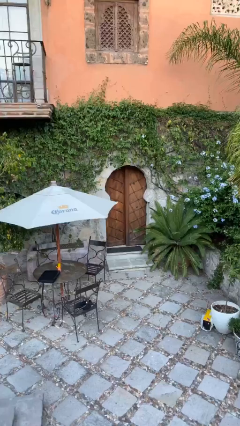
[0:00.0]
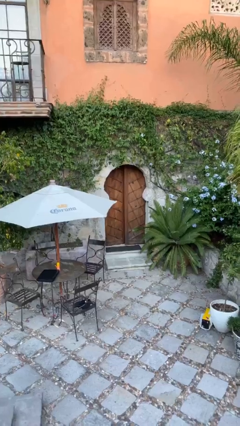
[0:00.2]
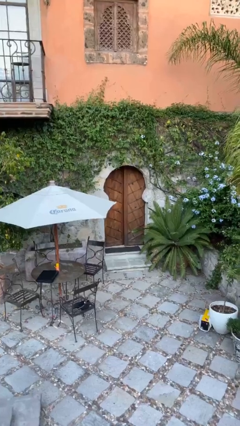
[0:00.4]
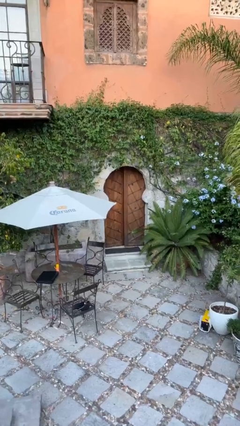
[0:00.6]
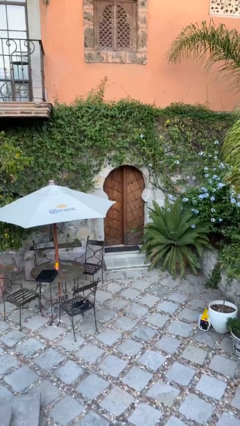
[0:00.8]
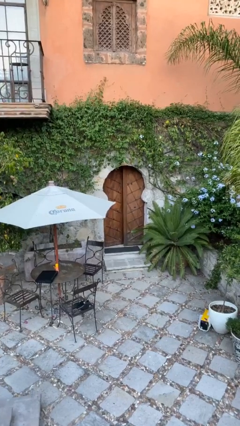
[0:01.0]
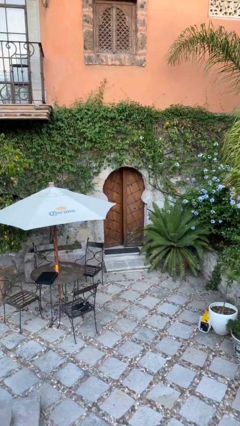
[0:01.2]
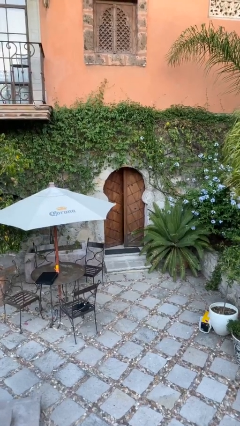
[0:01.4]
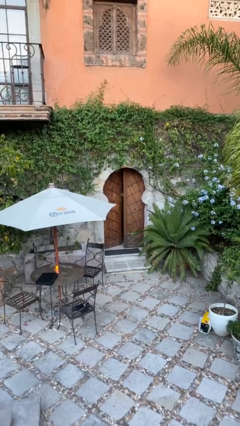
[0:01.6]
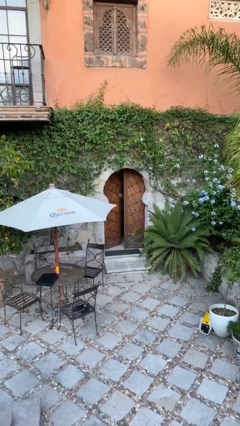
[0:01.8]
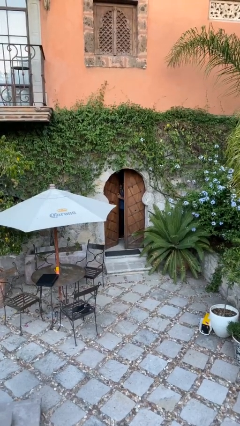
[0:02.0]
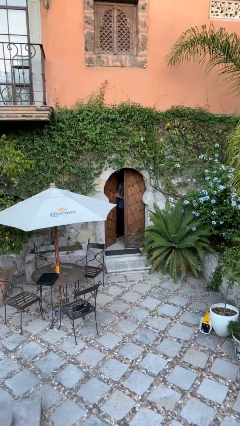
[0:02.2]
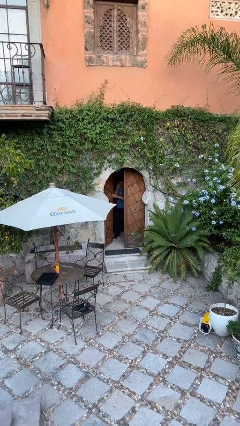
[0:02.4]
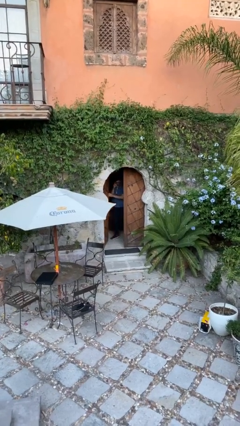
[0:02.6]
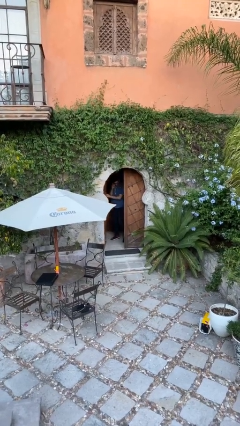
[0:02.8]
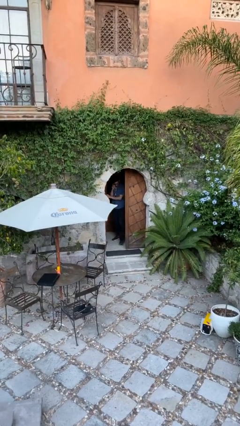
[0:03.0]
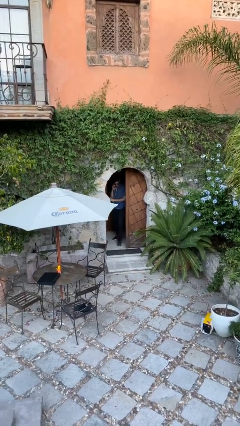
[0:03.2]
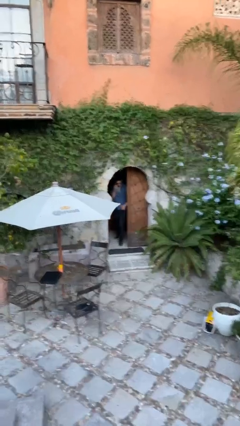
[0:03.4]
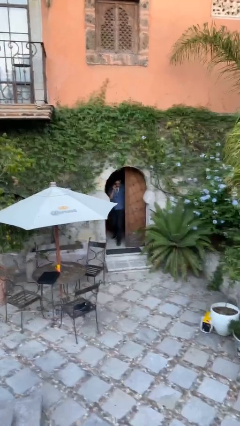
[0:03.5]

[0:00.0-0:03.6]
person opens facility door

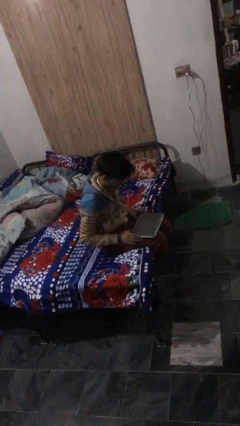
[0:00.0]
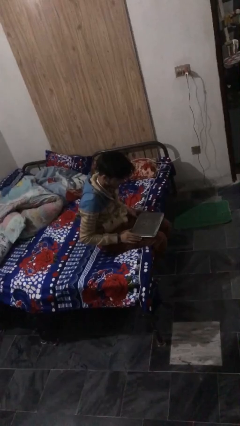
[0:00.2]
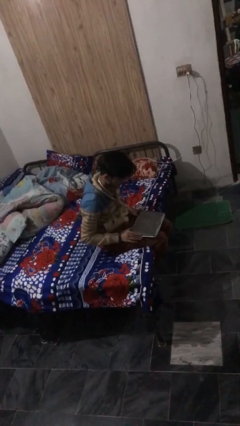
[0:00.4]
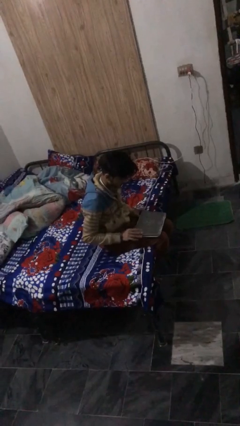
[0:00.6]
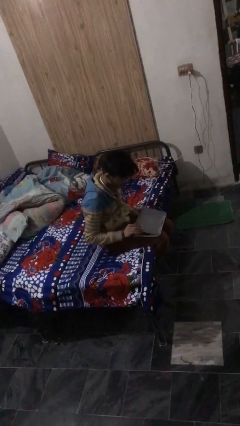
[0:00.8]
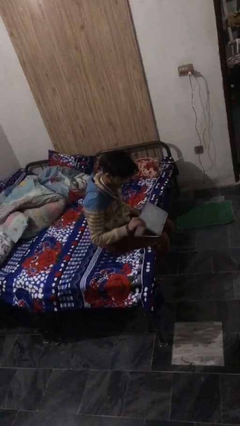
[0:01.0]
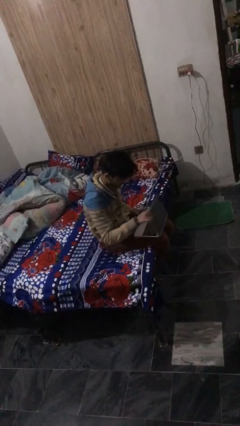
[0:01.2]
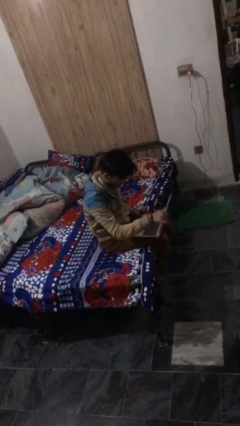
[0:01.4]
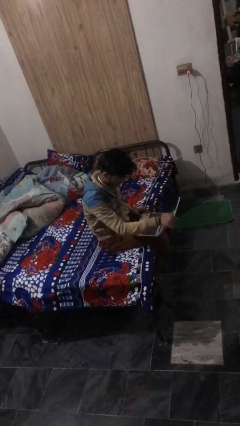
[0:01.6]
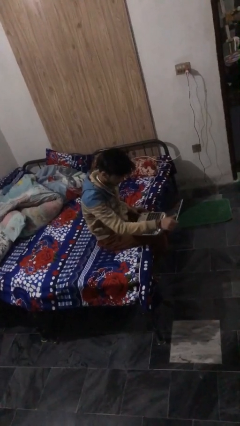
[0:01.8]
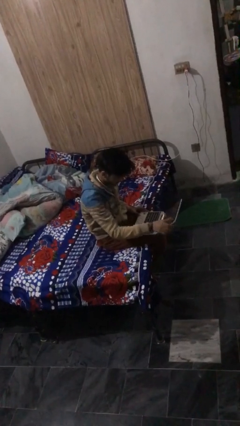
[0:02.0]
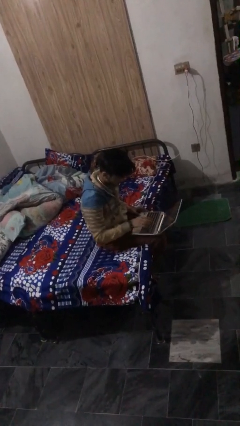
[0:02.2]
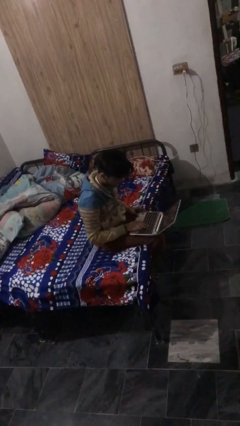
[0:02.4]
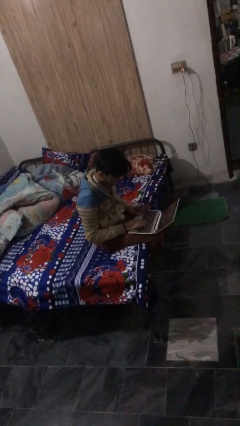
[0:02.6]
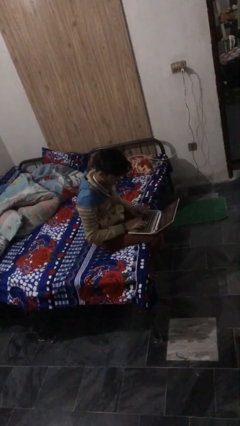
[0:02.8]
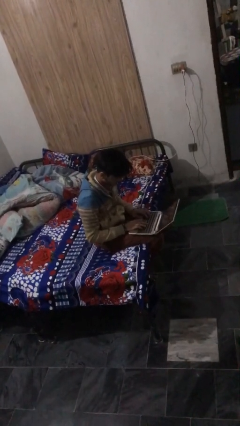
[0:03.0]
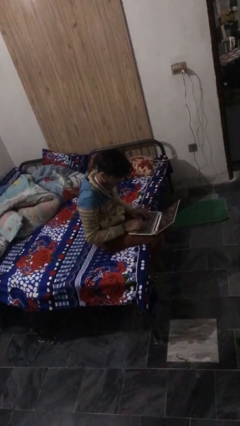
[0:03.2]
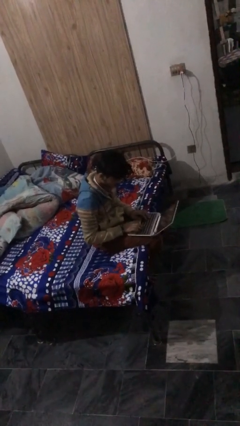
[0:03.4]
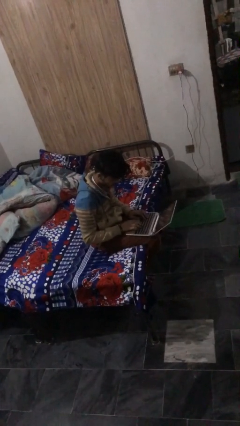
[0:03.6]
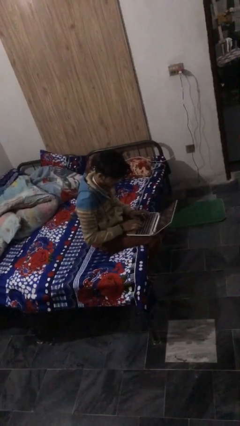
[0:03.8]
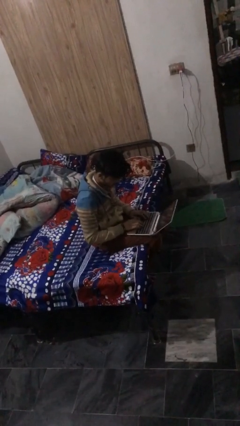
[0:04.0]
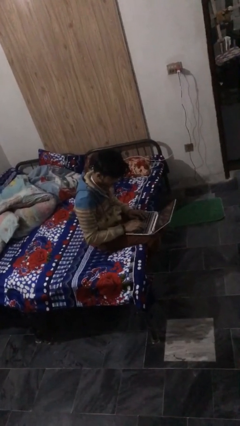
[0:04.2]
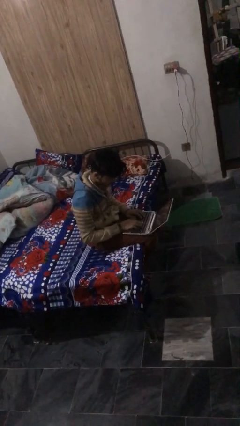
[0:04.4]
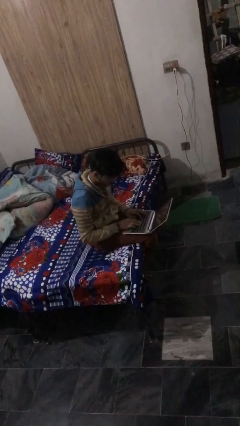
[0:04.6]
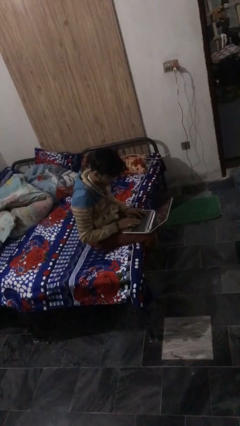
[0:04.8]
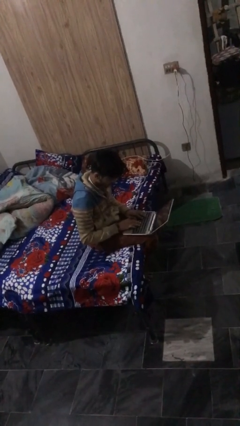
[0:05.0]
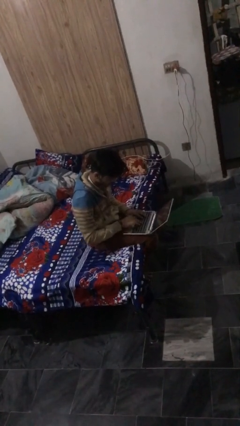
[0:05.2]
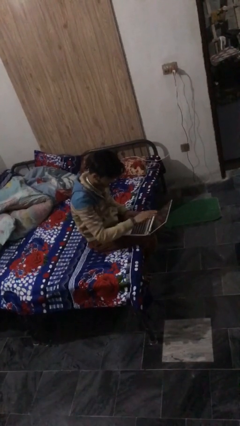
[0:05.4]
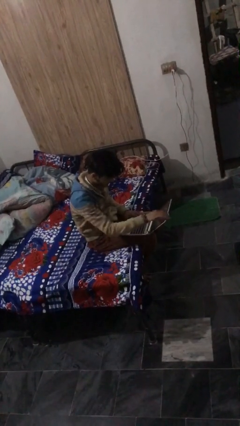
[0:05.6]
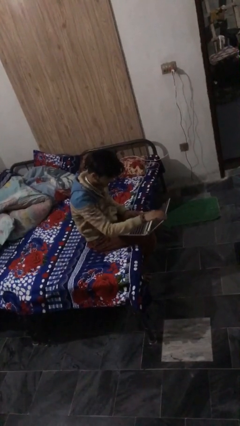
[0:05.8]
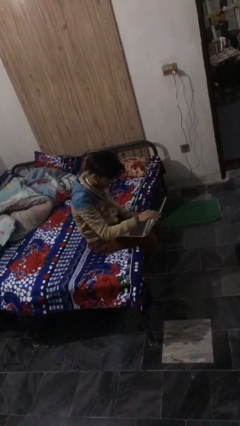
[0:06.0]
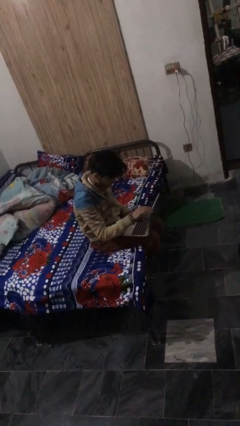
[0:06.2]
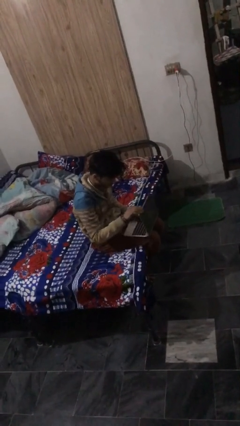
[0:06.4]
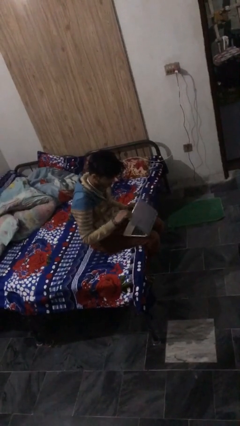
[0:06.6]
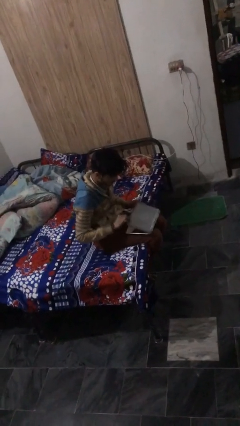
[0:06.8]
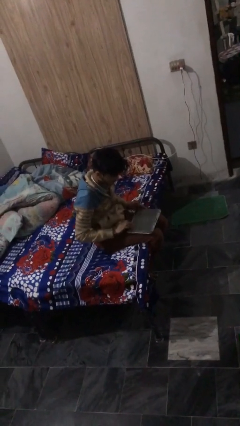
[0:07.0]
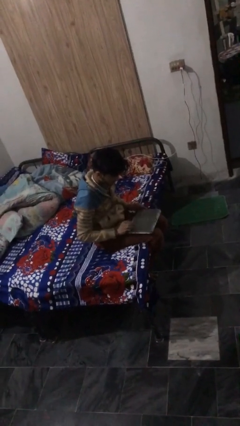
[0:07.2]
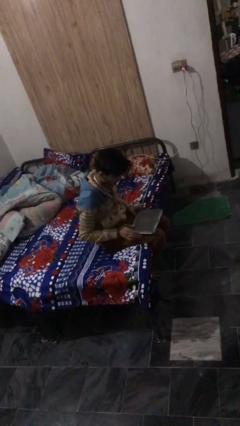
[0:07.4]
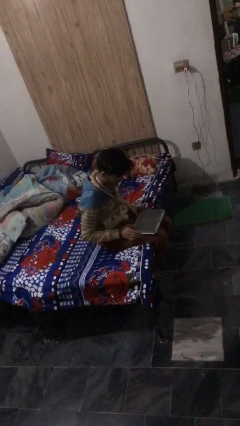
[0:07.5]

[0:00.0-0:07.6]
person interacts with laptop

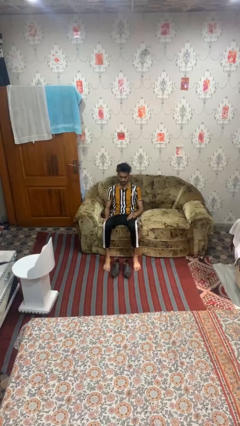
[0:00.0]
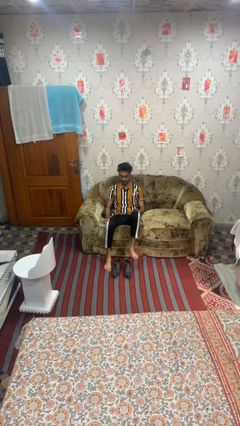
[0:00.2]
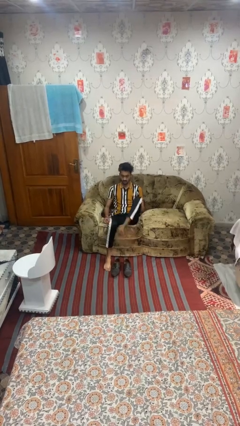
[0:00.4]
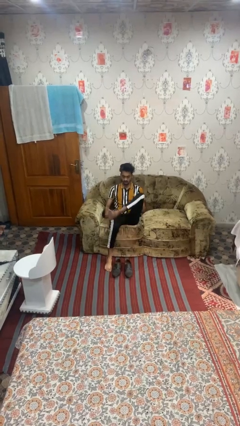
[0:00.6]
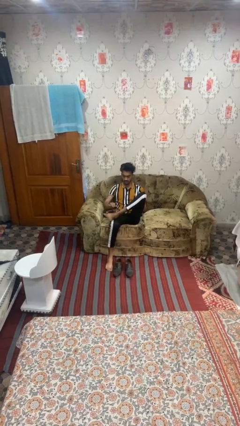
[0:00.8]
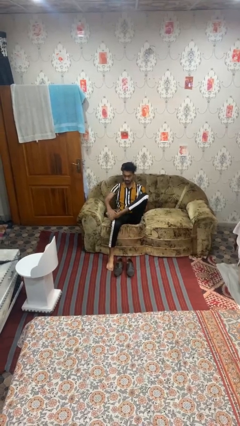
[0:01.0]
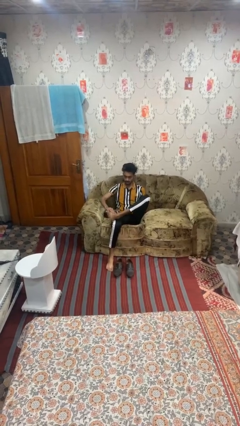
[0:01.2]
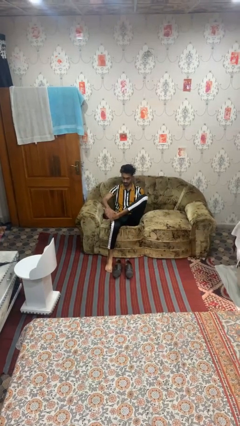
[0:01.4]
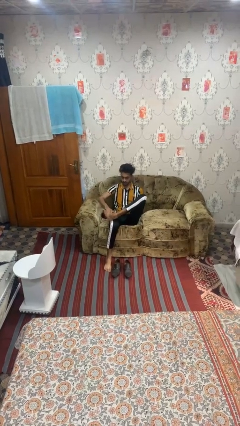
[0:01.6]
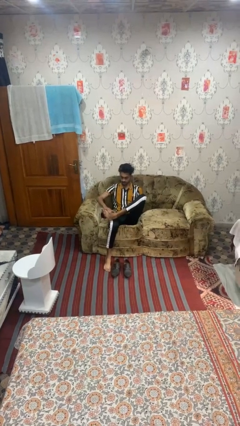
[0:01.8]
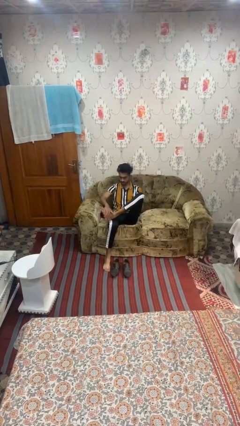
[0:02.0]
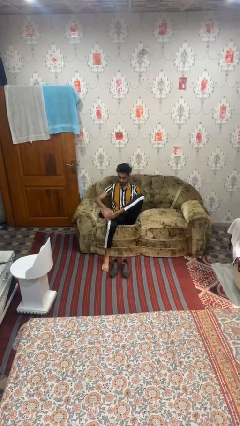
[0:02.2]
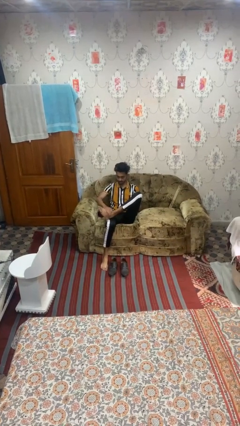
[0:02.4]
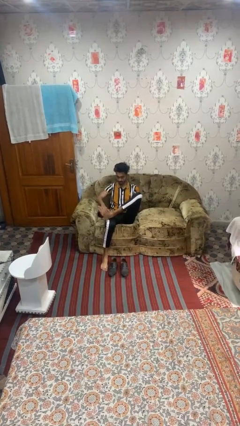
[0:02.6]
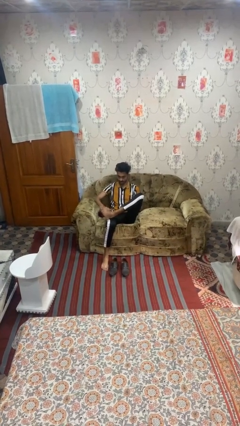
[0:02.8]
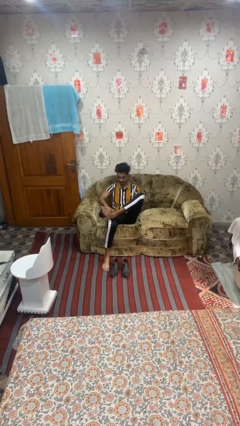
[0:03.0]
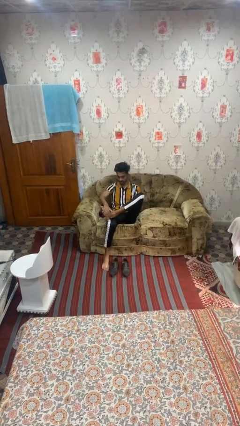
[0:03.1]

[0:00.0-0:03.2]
person rubs foot

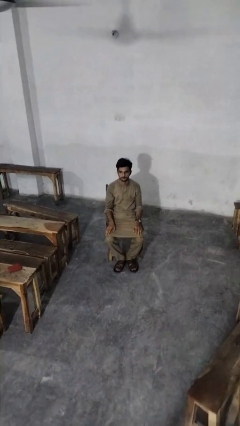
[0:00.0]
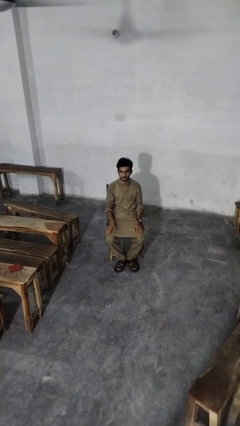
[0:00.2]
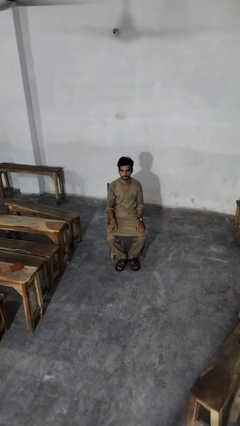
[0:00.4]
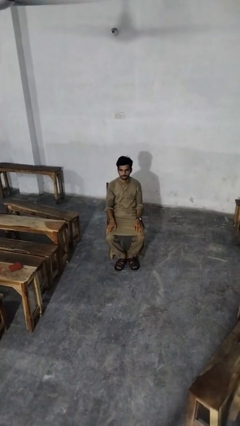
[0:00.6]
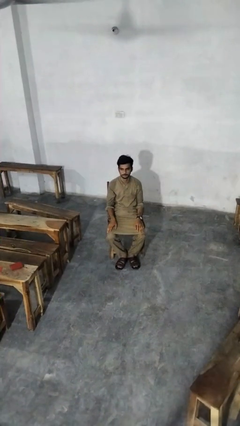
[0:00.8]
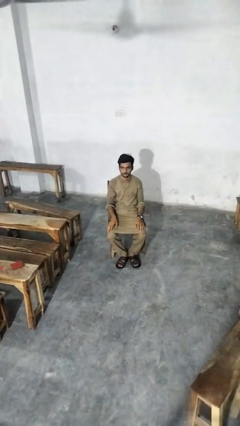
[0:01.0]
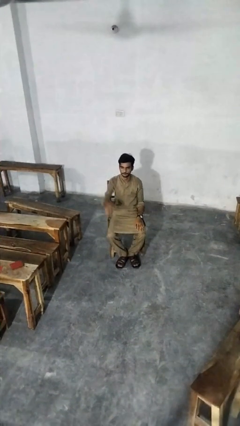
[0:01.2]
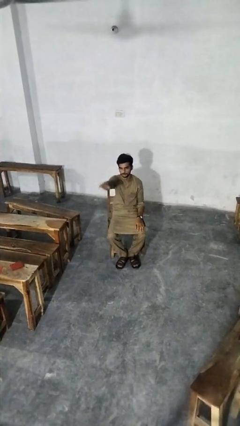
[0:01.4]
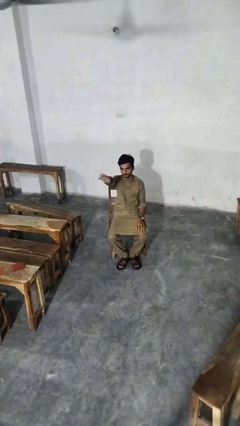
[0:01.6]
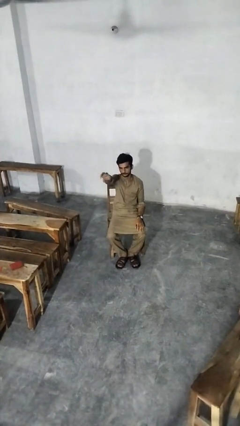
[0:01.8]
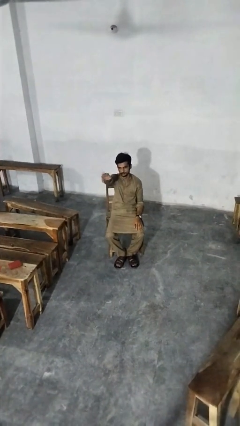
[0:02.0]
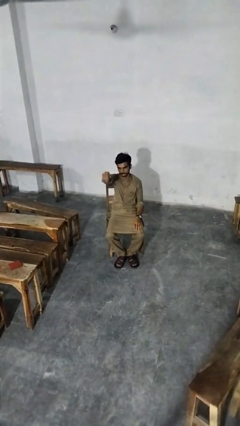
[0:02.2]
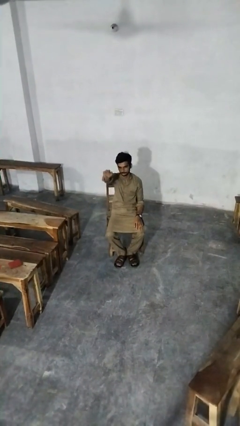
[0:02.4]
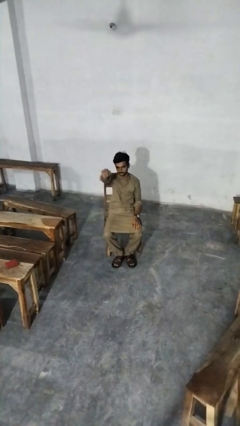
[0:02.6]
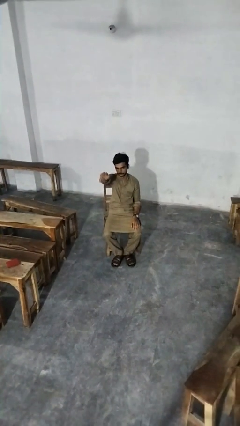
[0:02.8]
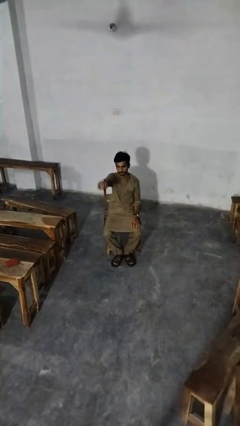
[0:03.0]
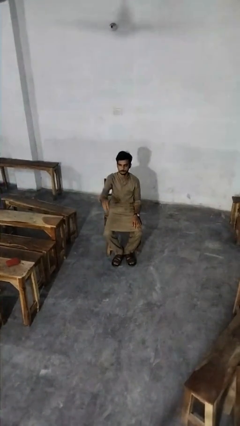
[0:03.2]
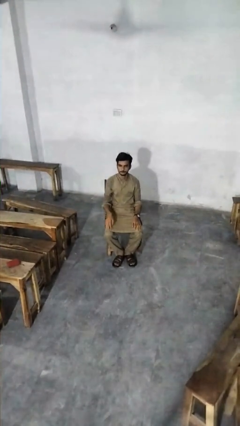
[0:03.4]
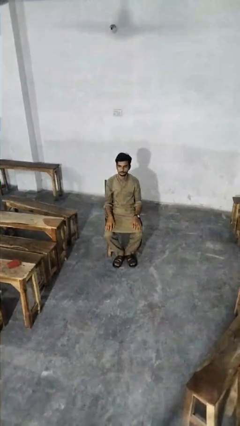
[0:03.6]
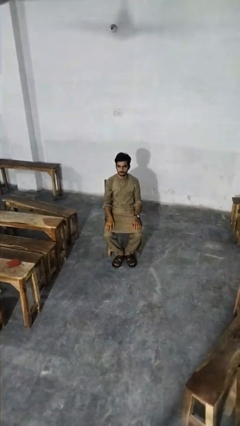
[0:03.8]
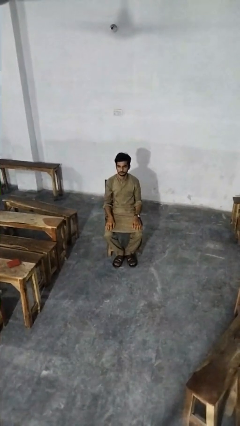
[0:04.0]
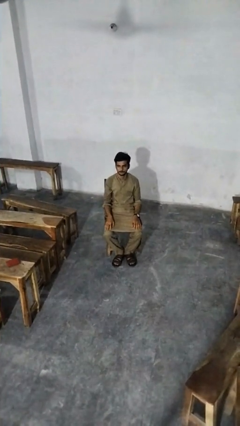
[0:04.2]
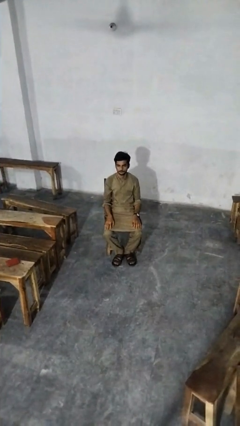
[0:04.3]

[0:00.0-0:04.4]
person gestures come here
